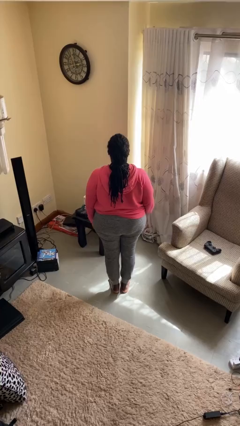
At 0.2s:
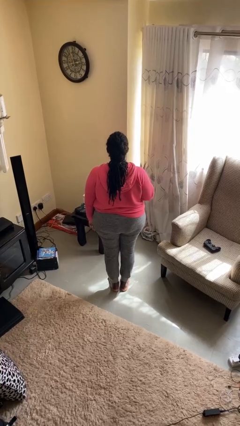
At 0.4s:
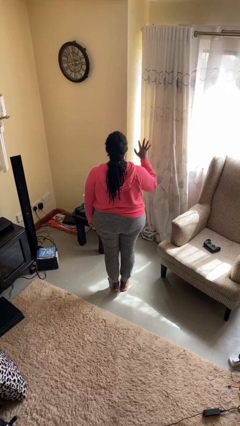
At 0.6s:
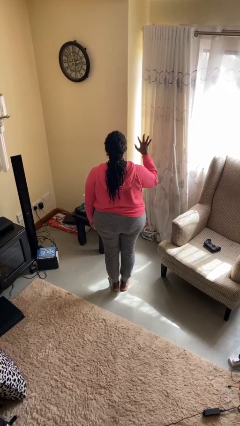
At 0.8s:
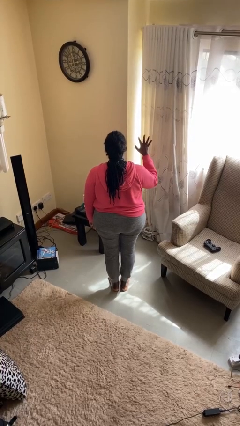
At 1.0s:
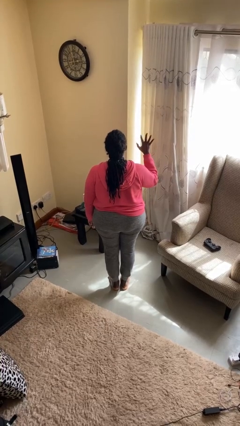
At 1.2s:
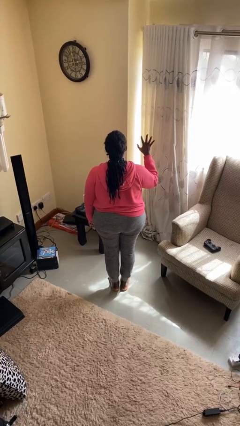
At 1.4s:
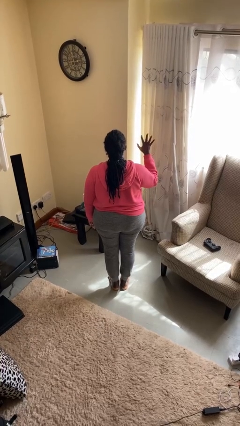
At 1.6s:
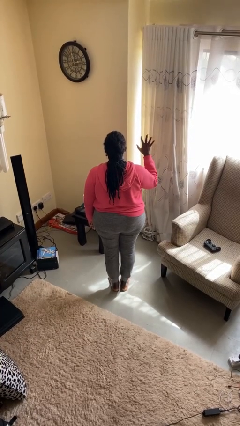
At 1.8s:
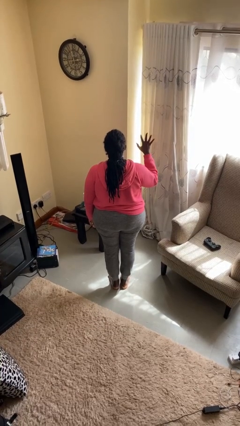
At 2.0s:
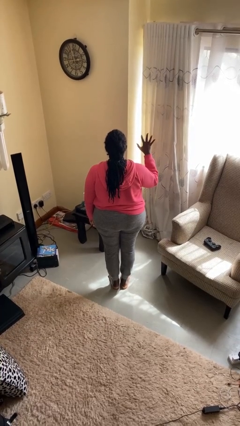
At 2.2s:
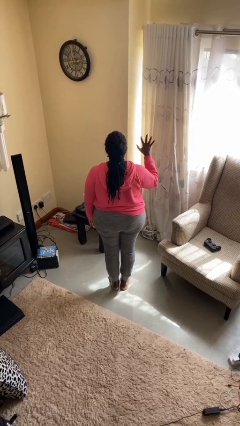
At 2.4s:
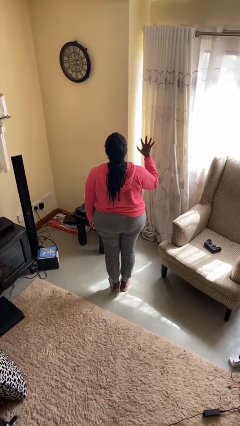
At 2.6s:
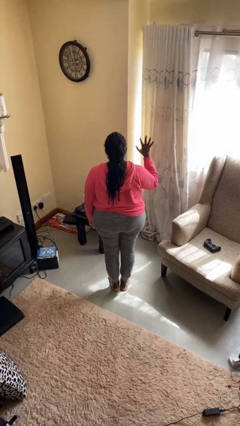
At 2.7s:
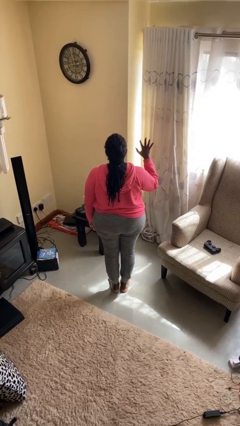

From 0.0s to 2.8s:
person gestures number five

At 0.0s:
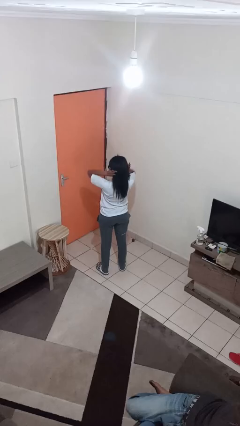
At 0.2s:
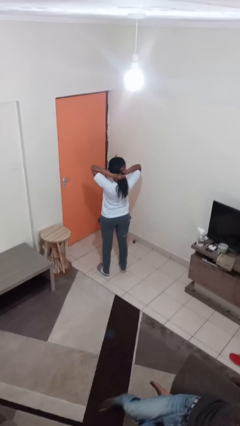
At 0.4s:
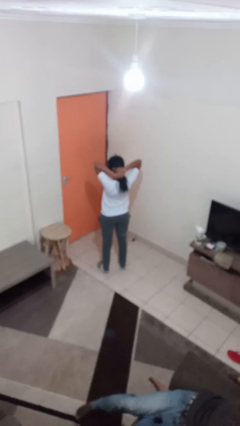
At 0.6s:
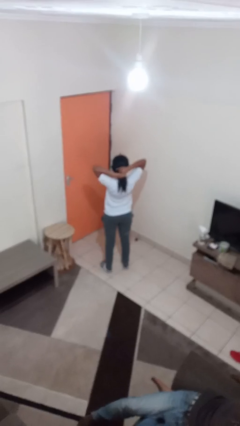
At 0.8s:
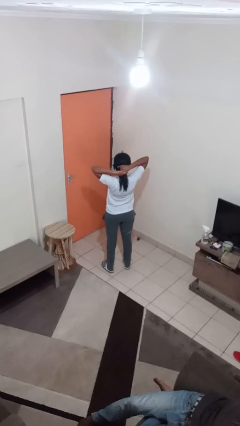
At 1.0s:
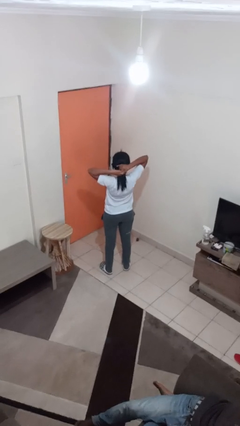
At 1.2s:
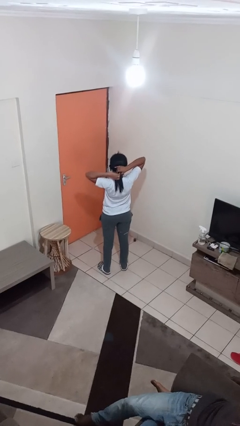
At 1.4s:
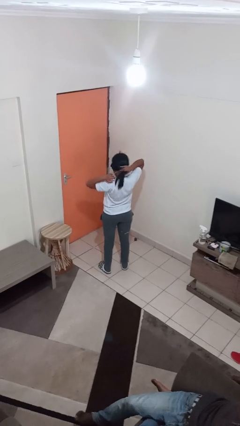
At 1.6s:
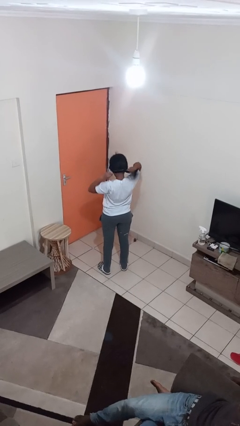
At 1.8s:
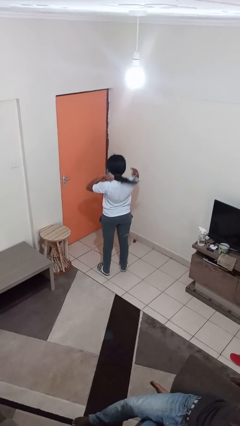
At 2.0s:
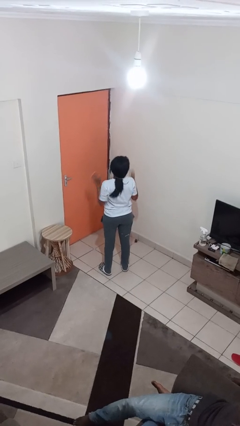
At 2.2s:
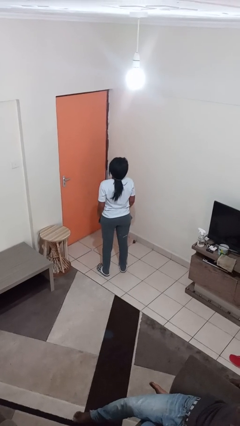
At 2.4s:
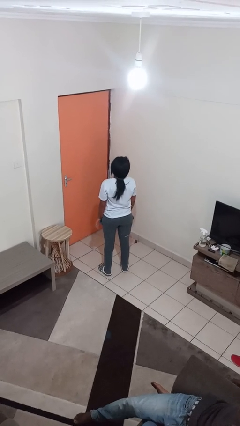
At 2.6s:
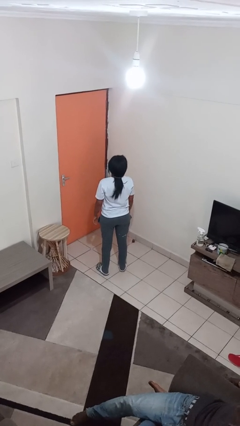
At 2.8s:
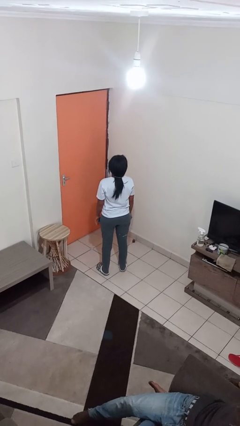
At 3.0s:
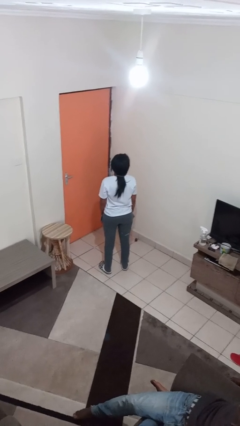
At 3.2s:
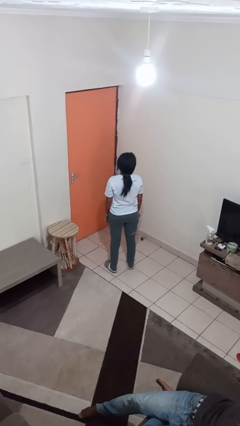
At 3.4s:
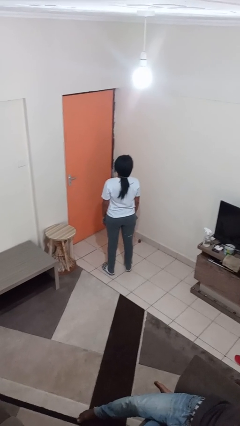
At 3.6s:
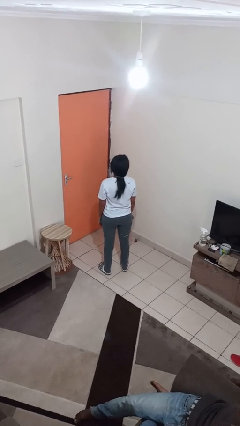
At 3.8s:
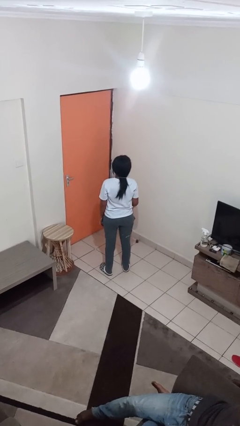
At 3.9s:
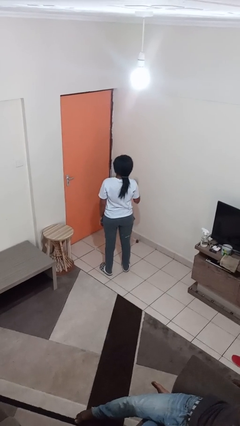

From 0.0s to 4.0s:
person puts hair in ponytail

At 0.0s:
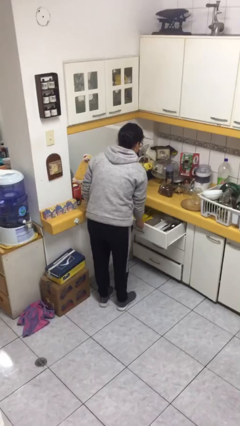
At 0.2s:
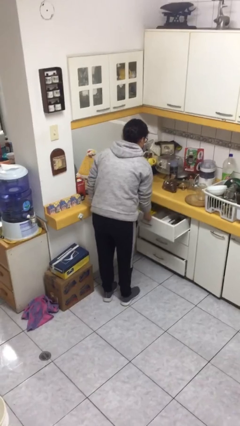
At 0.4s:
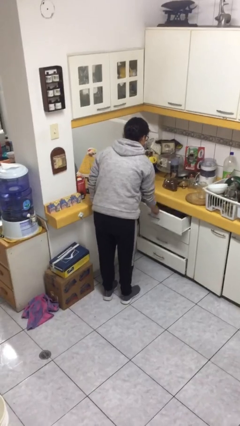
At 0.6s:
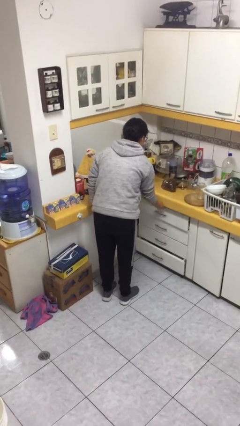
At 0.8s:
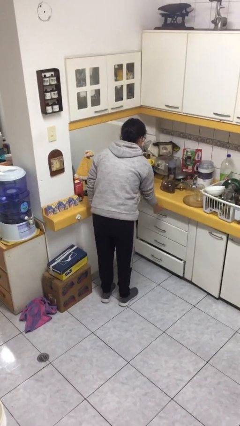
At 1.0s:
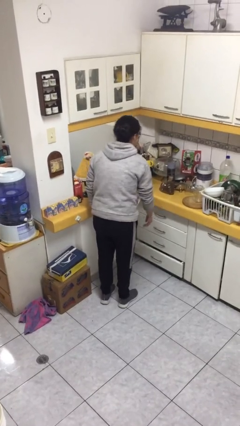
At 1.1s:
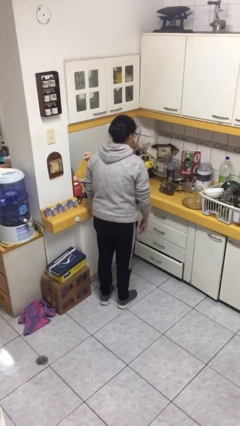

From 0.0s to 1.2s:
person closes kitchen drawer

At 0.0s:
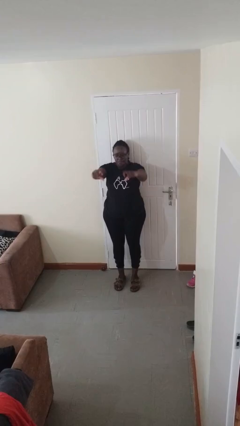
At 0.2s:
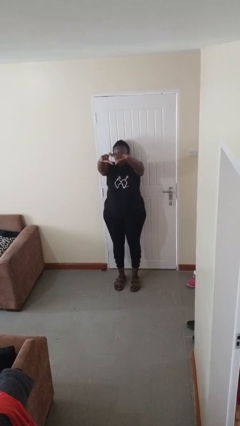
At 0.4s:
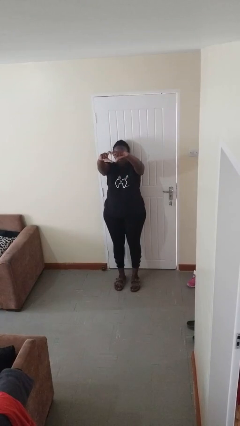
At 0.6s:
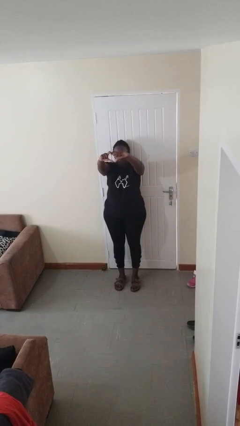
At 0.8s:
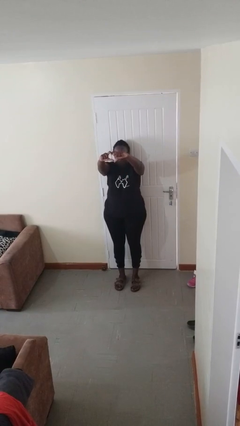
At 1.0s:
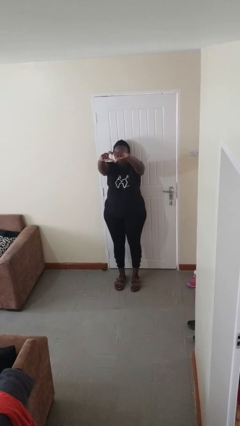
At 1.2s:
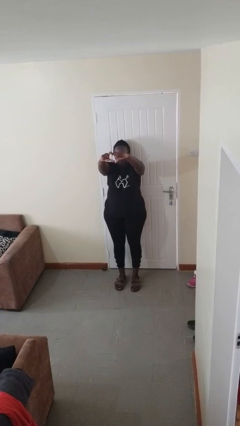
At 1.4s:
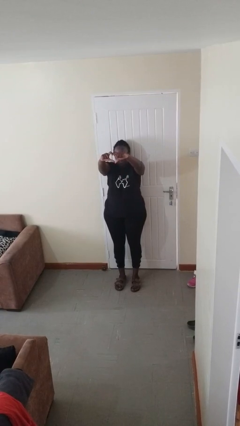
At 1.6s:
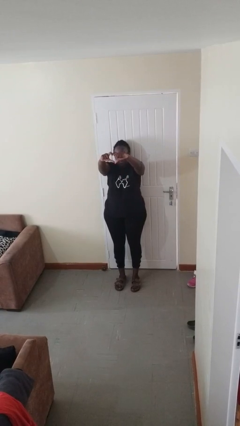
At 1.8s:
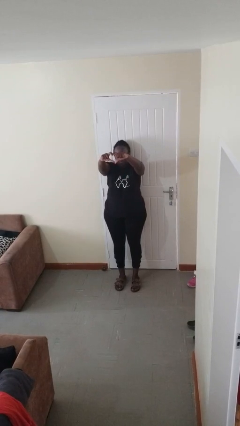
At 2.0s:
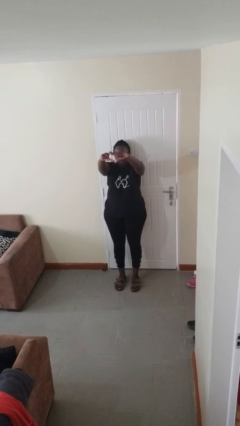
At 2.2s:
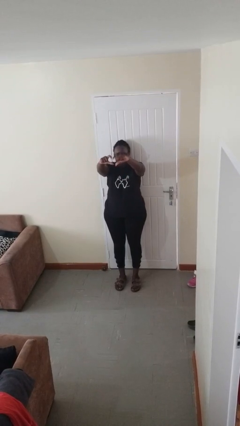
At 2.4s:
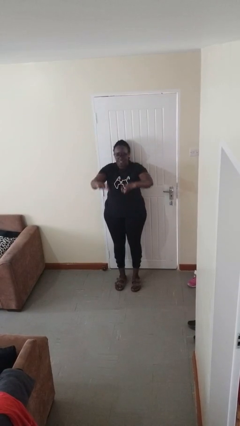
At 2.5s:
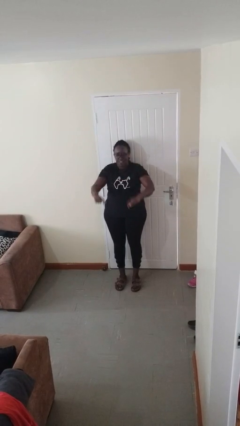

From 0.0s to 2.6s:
person gestures heart

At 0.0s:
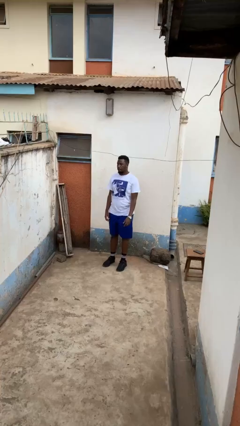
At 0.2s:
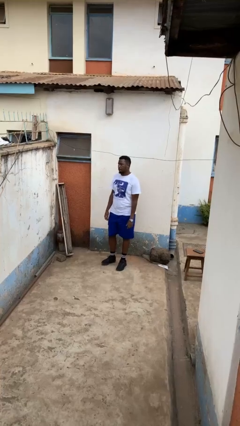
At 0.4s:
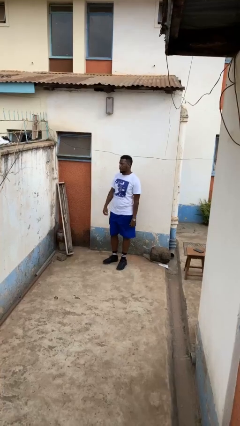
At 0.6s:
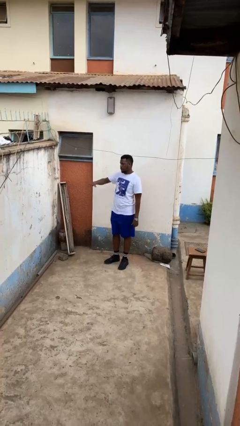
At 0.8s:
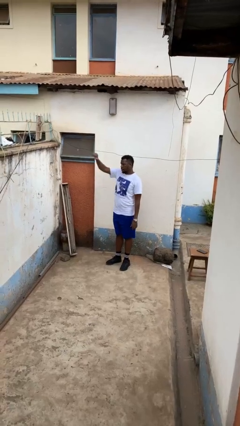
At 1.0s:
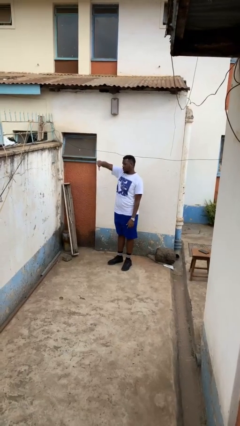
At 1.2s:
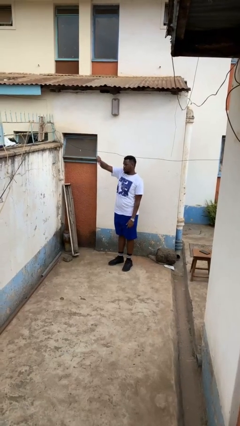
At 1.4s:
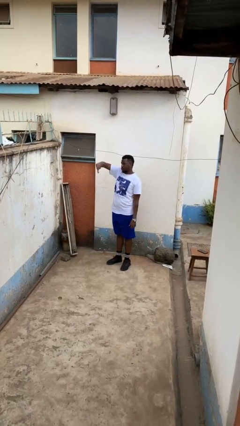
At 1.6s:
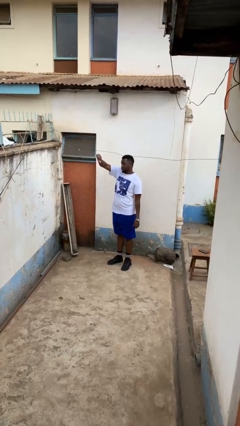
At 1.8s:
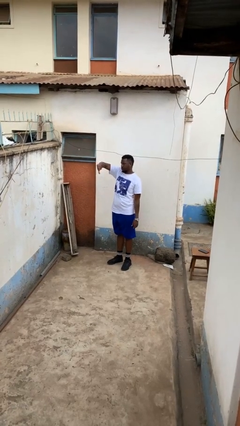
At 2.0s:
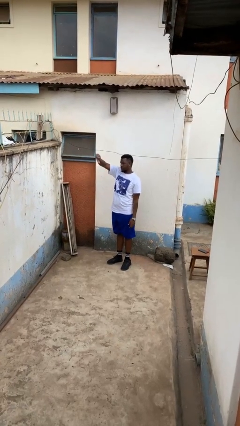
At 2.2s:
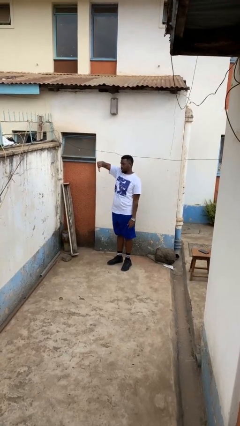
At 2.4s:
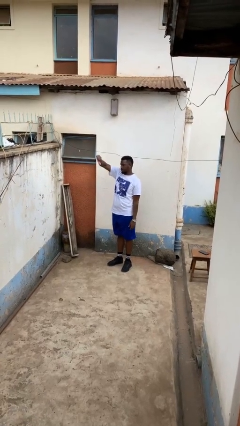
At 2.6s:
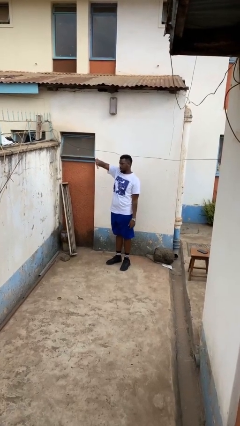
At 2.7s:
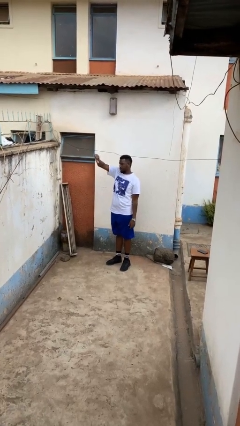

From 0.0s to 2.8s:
person gestures thumbs down

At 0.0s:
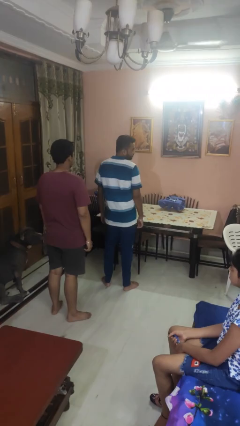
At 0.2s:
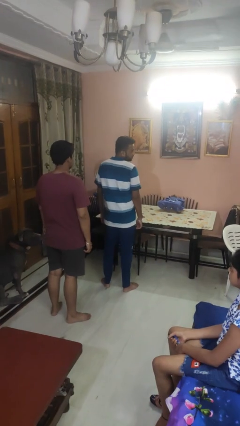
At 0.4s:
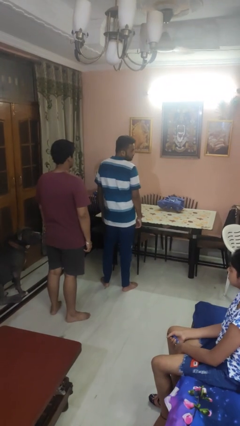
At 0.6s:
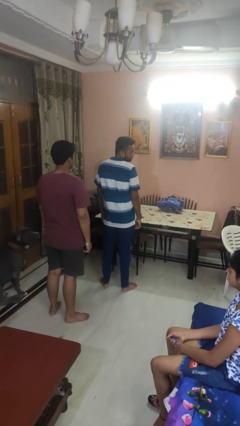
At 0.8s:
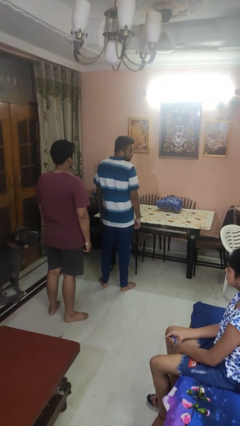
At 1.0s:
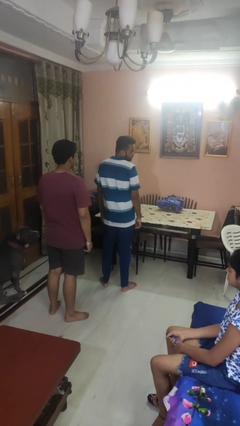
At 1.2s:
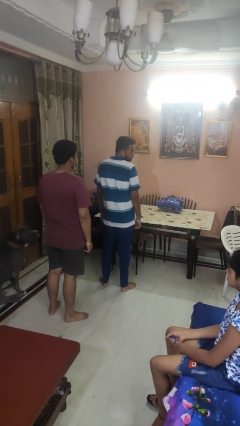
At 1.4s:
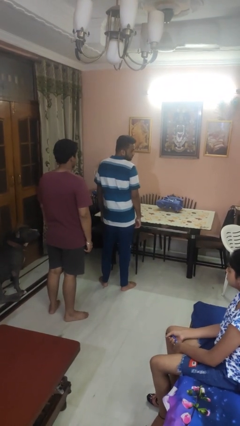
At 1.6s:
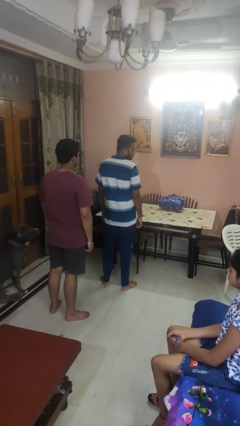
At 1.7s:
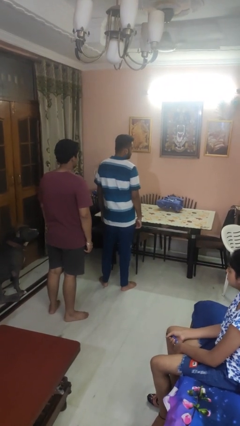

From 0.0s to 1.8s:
person looks over shoulder

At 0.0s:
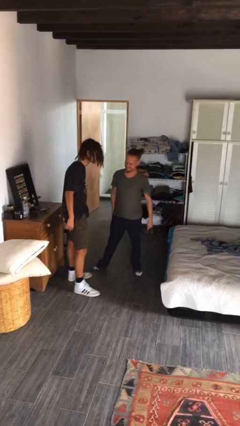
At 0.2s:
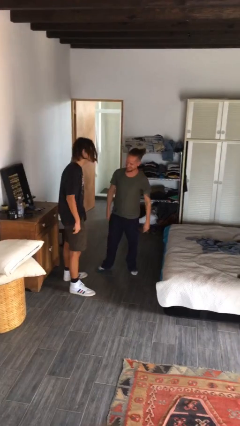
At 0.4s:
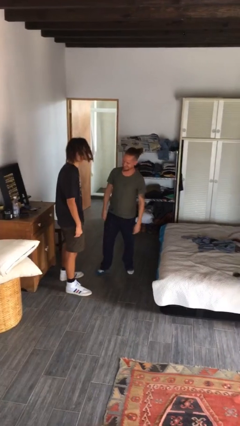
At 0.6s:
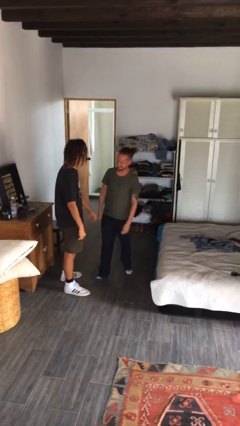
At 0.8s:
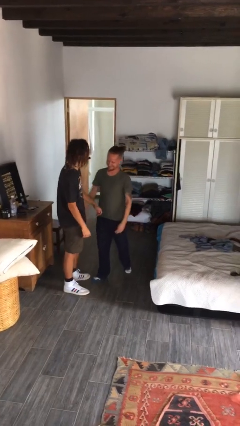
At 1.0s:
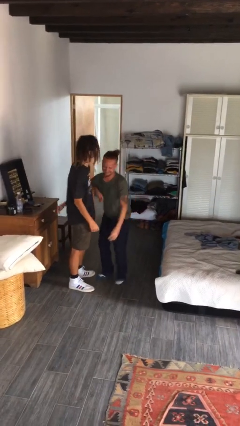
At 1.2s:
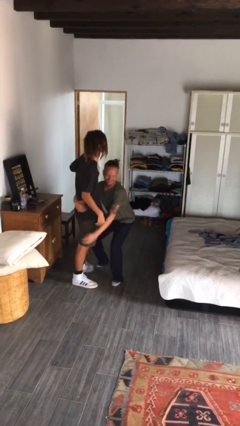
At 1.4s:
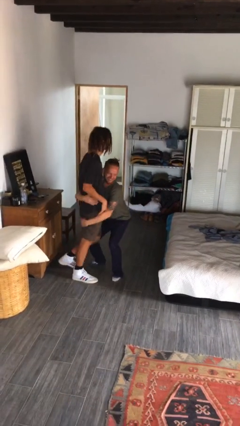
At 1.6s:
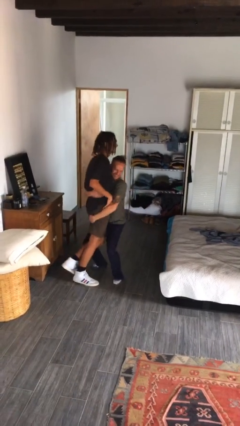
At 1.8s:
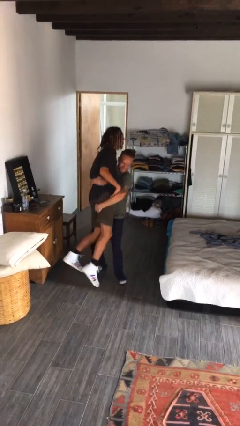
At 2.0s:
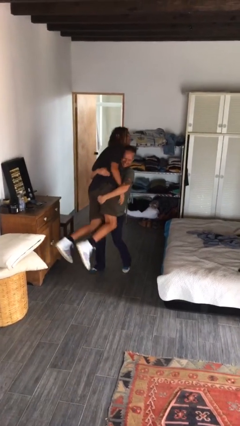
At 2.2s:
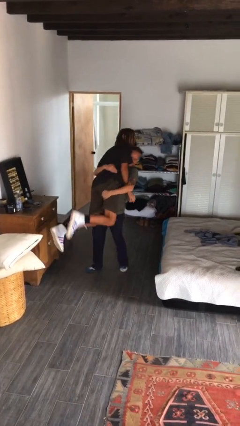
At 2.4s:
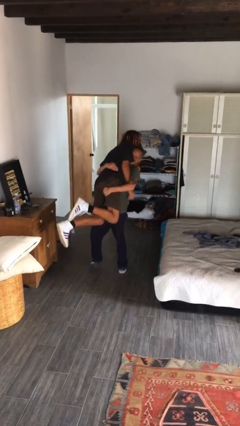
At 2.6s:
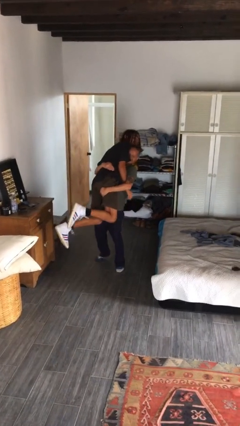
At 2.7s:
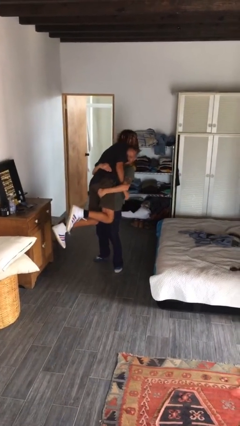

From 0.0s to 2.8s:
person picks up person
